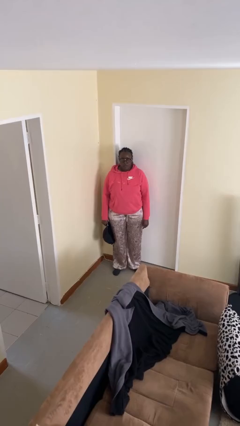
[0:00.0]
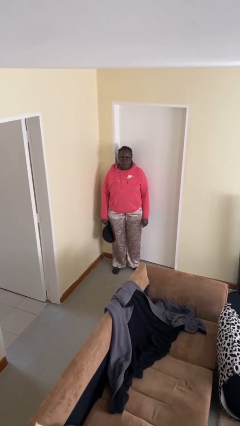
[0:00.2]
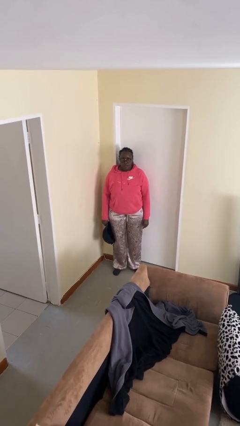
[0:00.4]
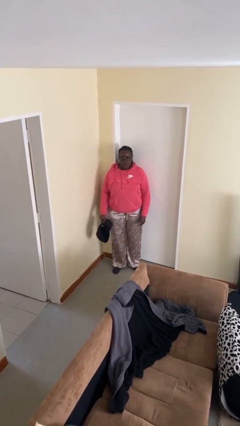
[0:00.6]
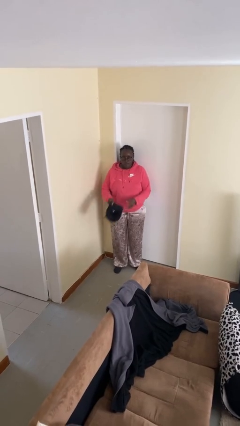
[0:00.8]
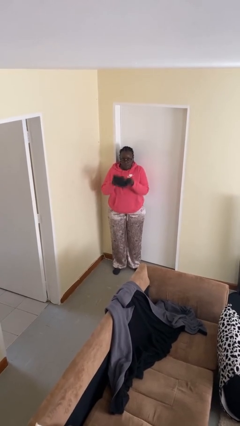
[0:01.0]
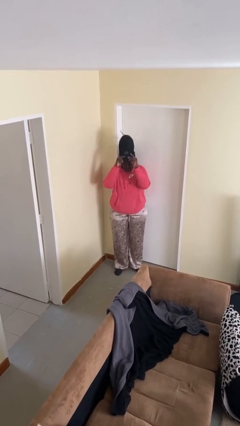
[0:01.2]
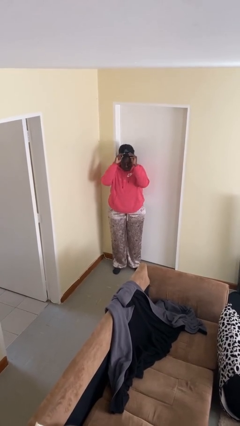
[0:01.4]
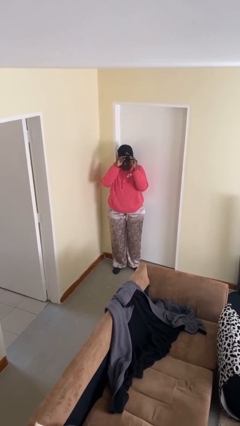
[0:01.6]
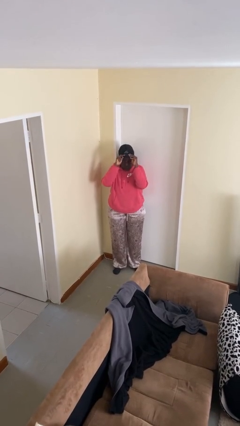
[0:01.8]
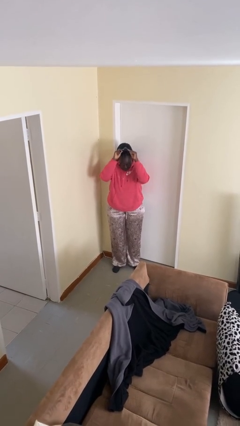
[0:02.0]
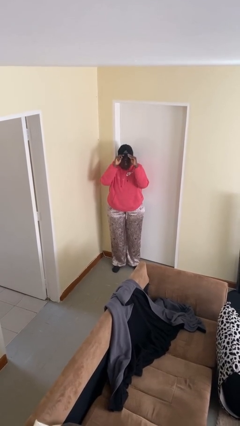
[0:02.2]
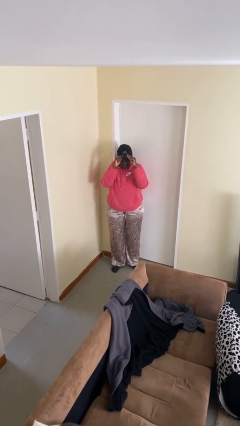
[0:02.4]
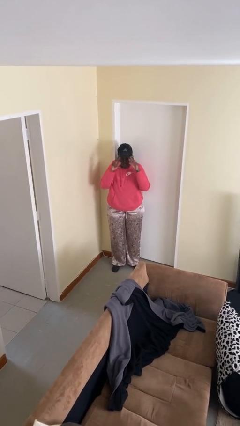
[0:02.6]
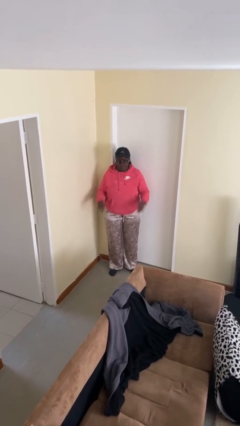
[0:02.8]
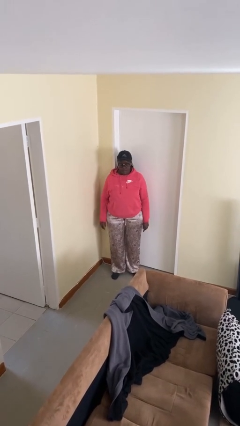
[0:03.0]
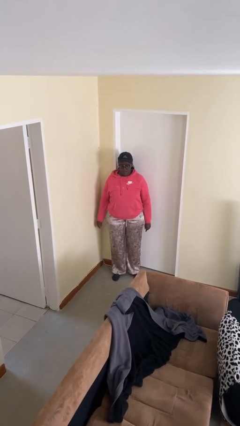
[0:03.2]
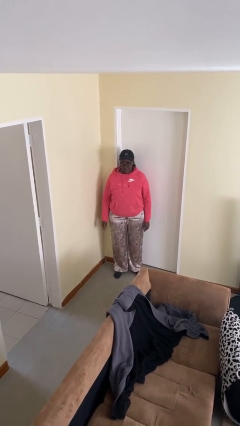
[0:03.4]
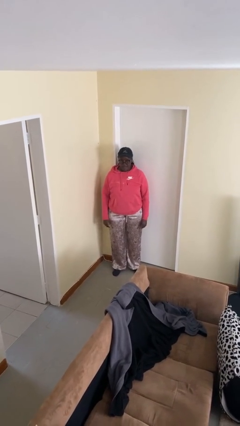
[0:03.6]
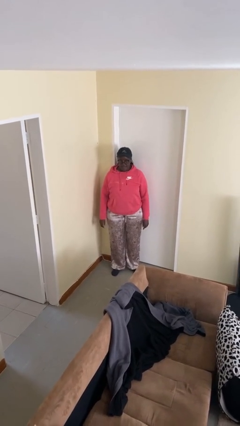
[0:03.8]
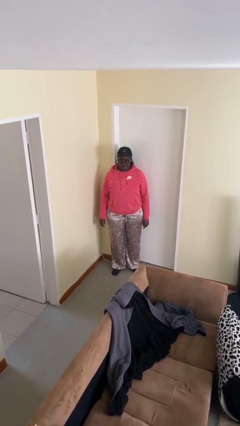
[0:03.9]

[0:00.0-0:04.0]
person puts on hat

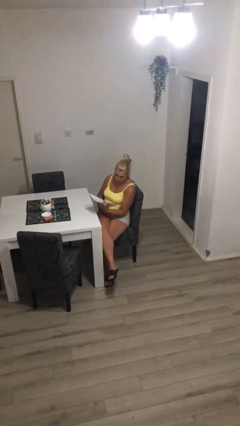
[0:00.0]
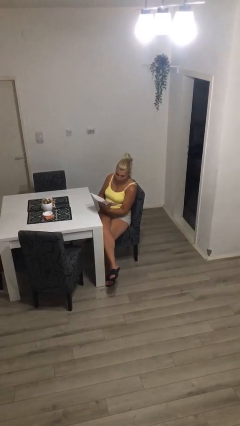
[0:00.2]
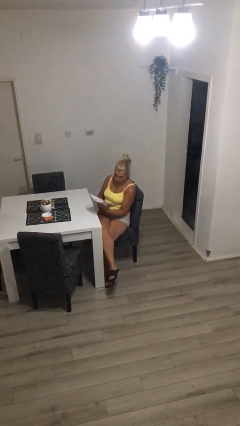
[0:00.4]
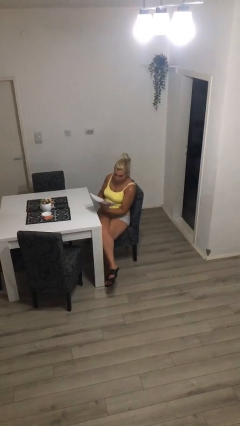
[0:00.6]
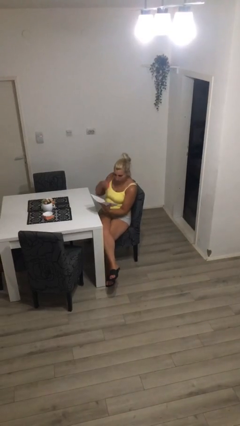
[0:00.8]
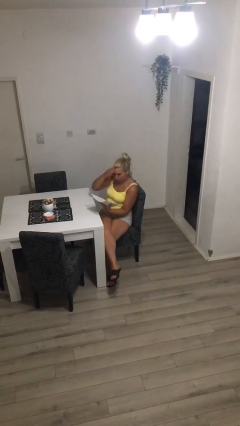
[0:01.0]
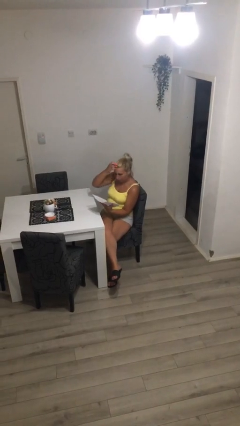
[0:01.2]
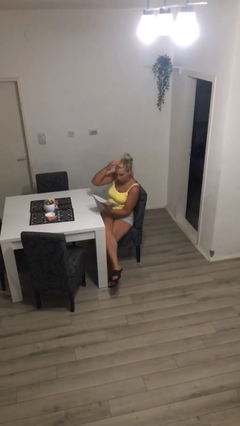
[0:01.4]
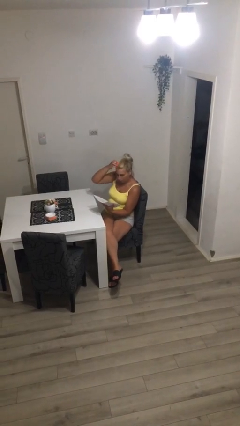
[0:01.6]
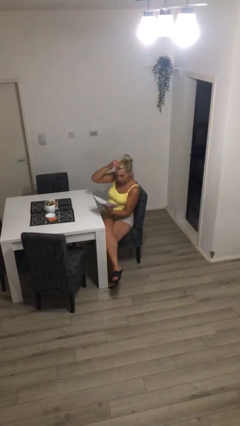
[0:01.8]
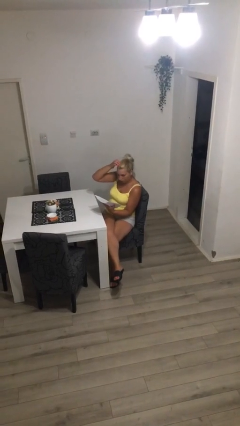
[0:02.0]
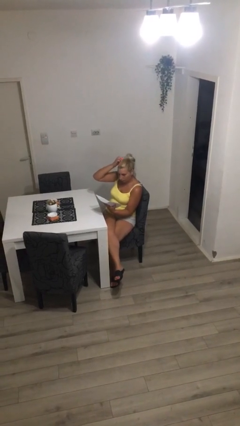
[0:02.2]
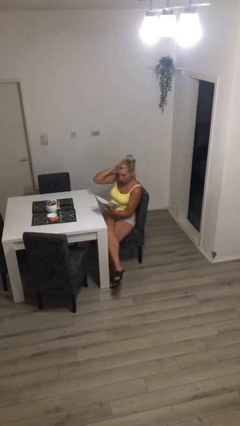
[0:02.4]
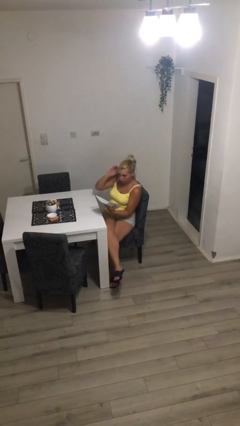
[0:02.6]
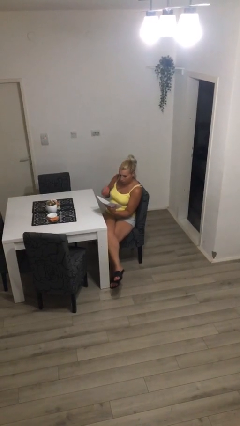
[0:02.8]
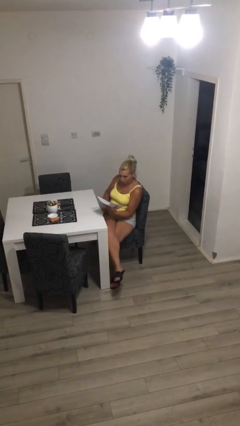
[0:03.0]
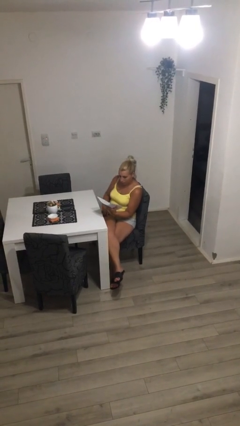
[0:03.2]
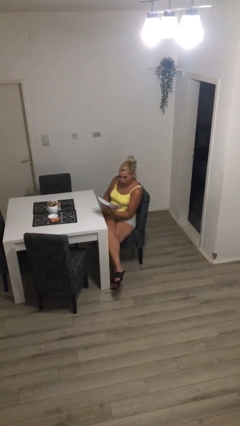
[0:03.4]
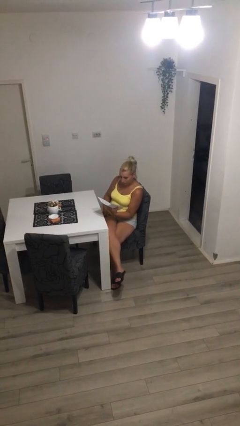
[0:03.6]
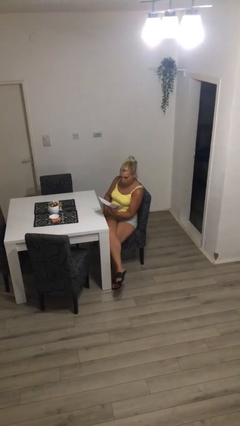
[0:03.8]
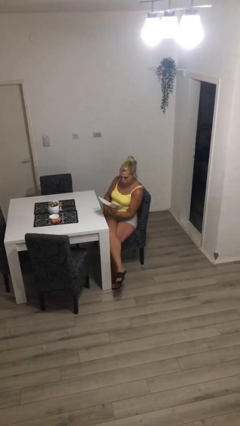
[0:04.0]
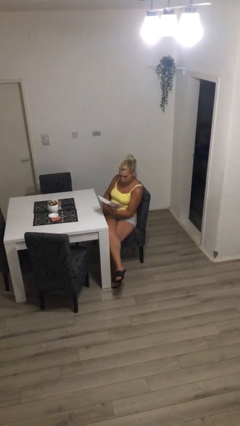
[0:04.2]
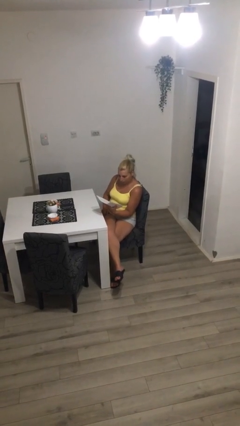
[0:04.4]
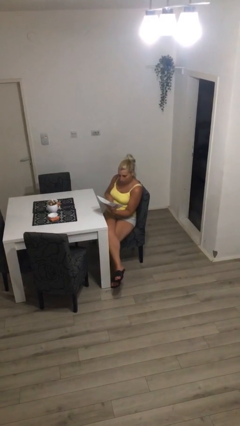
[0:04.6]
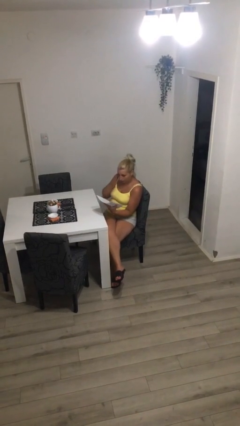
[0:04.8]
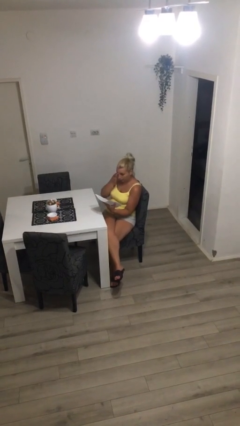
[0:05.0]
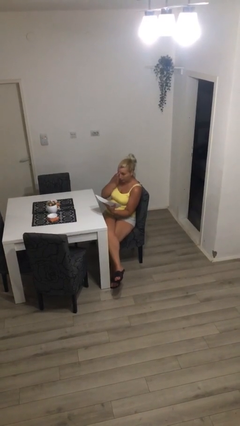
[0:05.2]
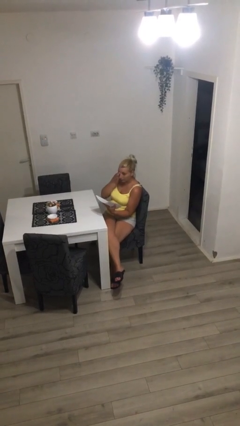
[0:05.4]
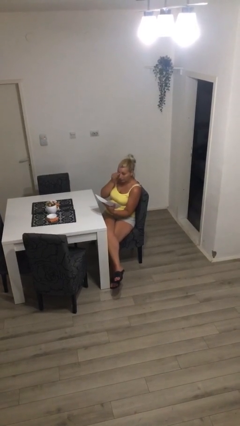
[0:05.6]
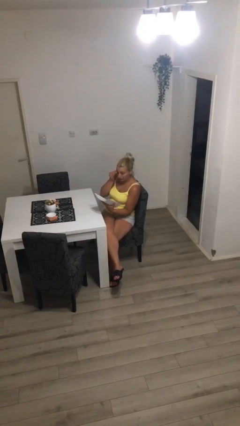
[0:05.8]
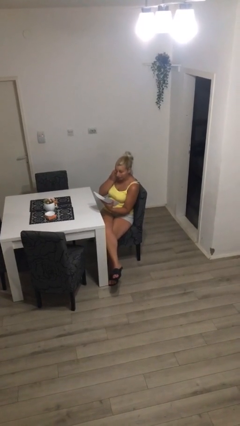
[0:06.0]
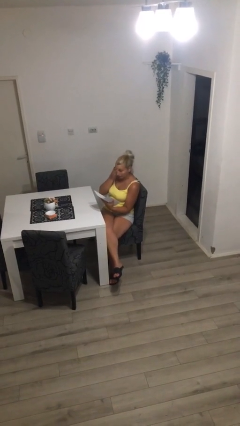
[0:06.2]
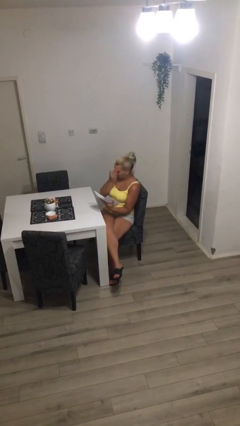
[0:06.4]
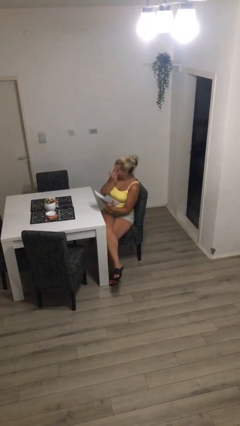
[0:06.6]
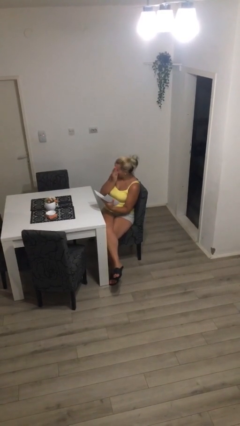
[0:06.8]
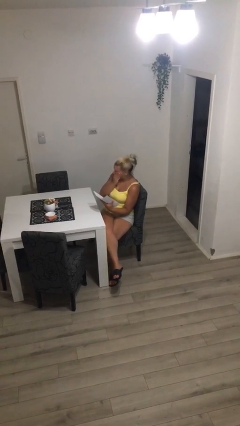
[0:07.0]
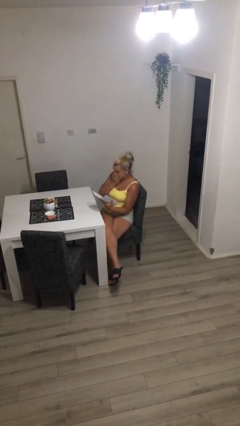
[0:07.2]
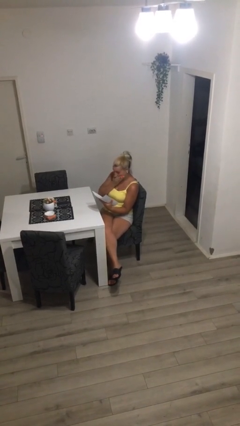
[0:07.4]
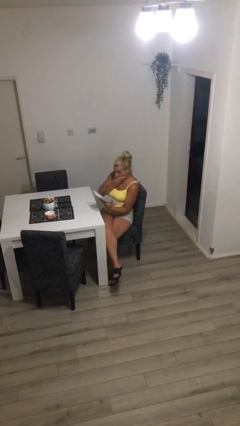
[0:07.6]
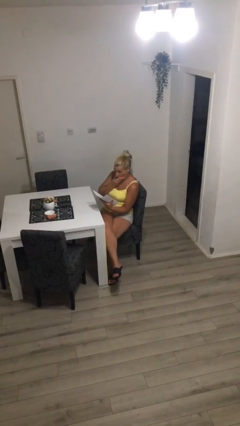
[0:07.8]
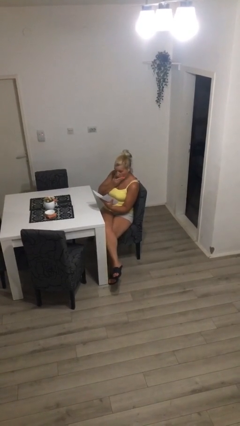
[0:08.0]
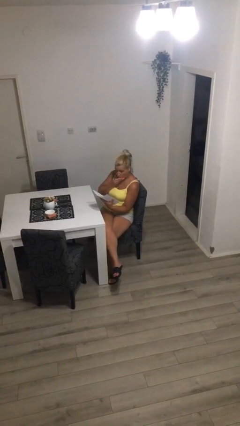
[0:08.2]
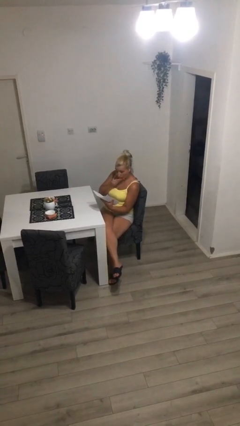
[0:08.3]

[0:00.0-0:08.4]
person reads document

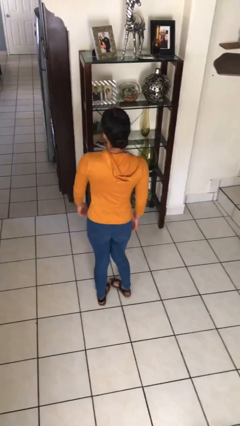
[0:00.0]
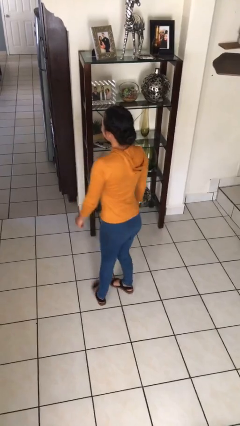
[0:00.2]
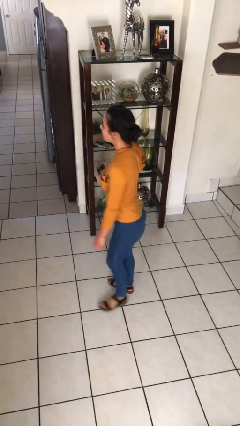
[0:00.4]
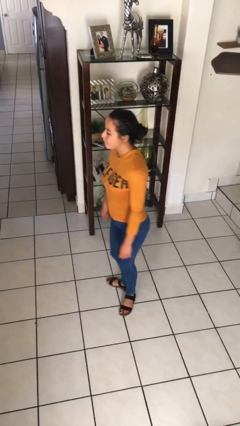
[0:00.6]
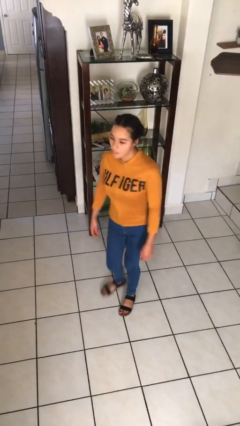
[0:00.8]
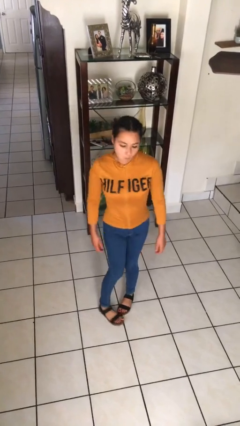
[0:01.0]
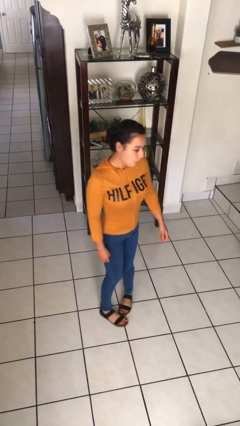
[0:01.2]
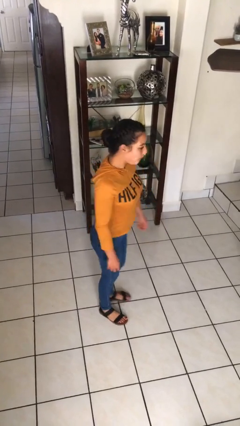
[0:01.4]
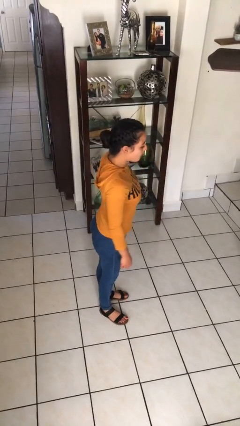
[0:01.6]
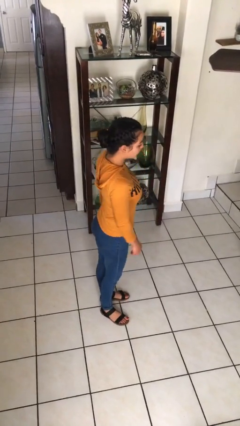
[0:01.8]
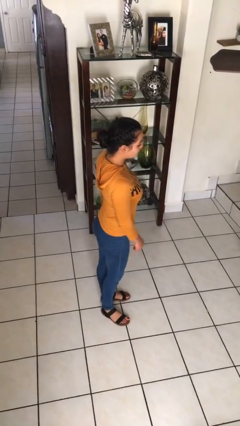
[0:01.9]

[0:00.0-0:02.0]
person twirls

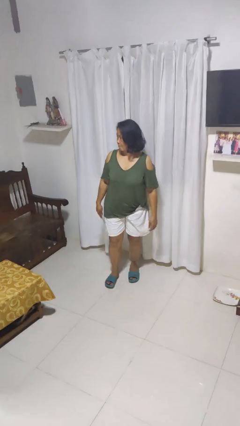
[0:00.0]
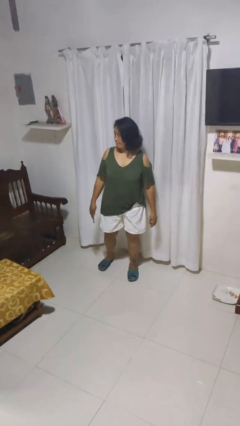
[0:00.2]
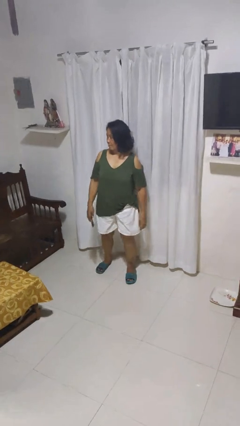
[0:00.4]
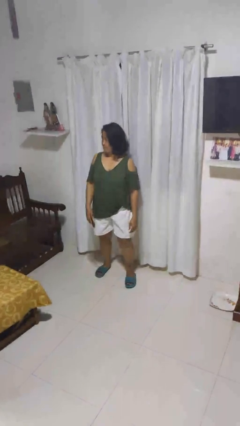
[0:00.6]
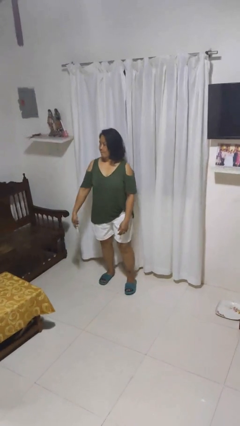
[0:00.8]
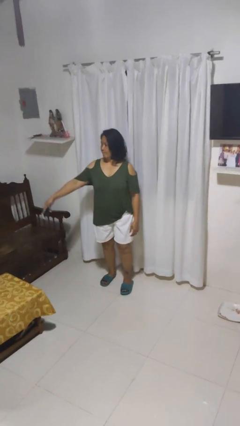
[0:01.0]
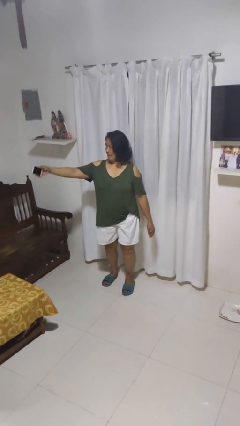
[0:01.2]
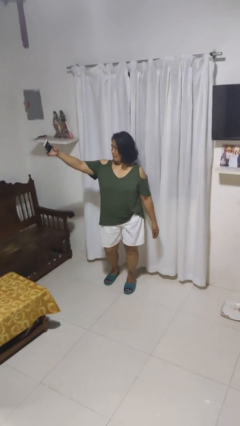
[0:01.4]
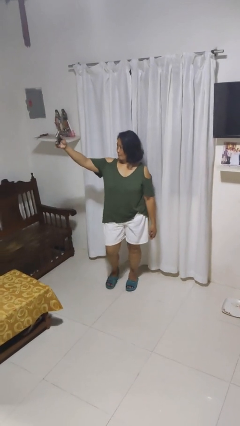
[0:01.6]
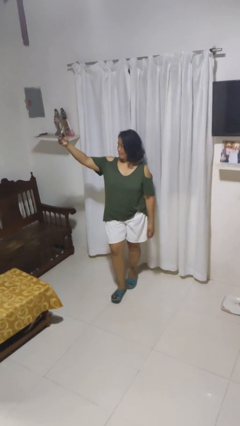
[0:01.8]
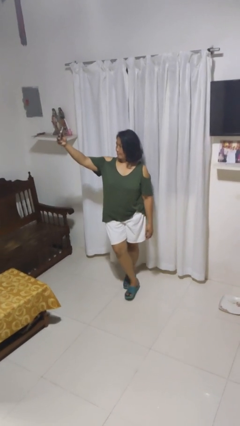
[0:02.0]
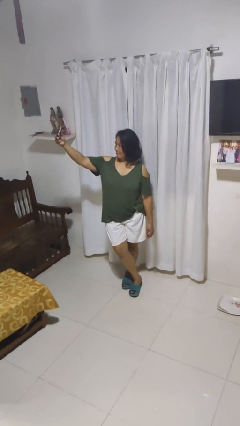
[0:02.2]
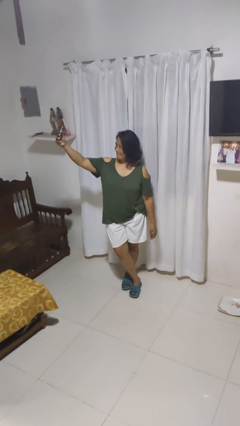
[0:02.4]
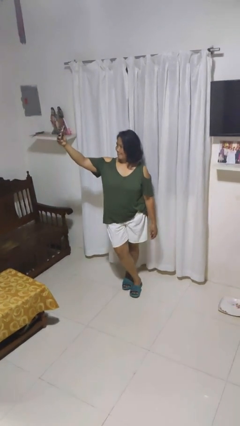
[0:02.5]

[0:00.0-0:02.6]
person takes selfie

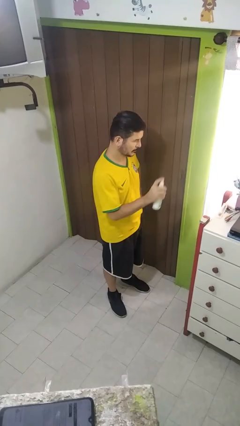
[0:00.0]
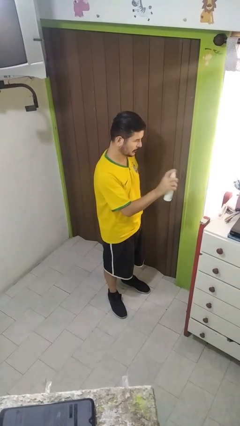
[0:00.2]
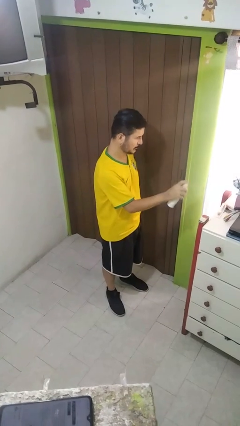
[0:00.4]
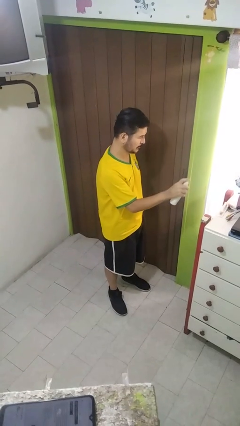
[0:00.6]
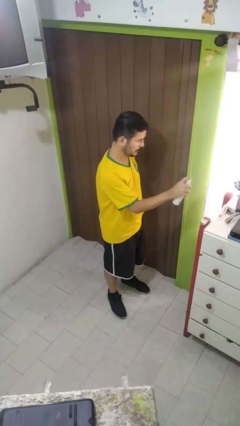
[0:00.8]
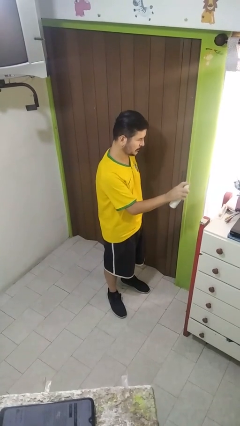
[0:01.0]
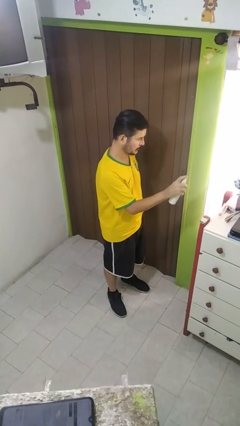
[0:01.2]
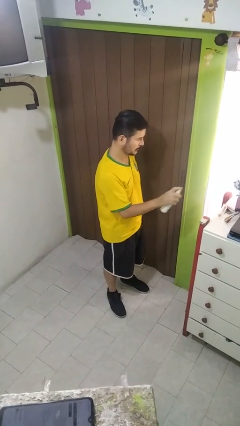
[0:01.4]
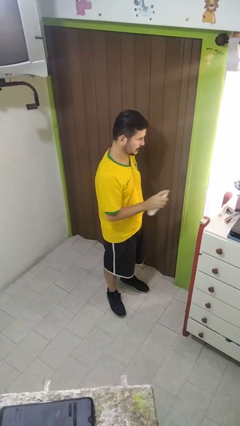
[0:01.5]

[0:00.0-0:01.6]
person sprays from bottle
